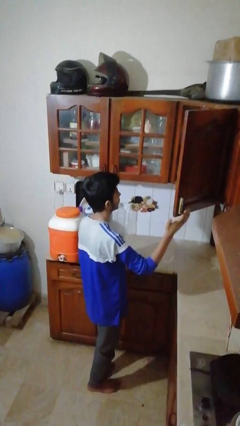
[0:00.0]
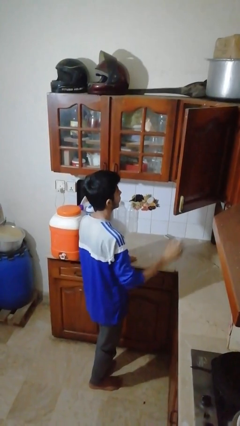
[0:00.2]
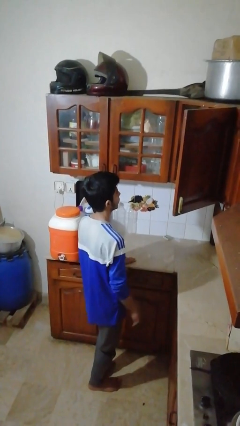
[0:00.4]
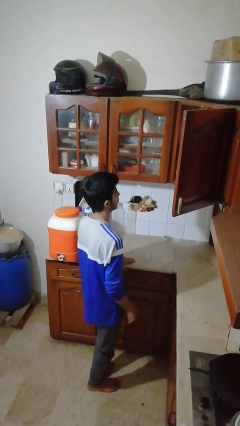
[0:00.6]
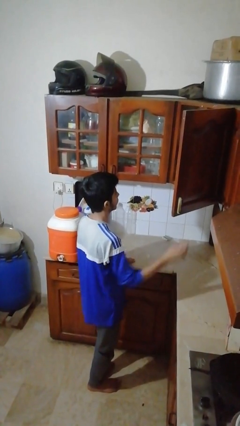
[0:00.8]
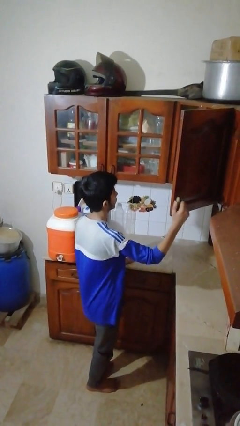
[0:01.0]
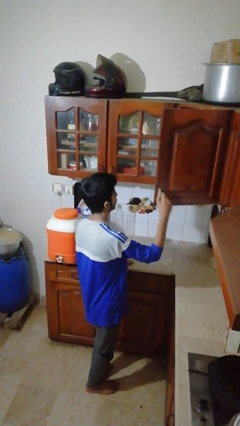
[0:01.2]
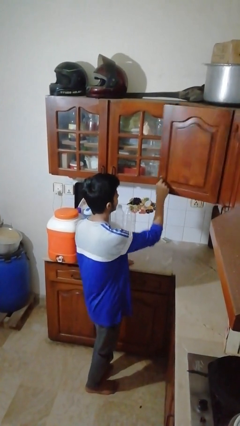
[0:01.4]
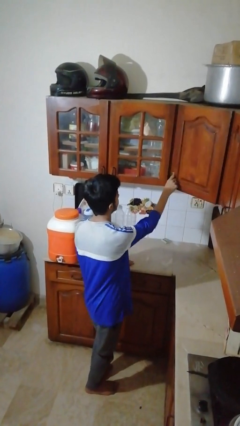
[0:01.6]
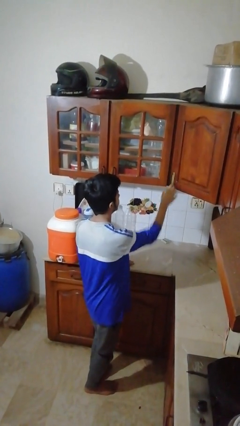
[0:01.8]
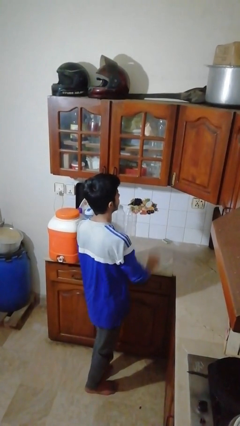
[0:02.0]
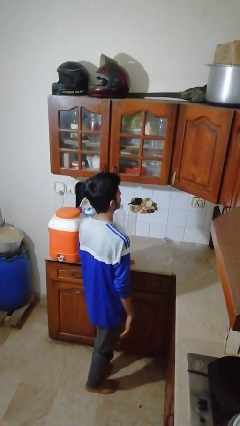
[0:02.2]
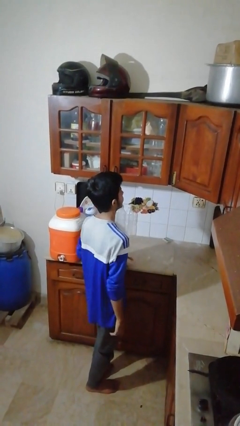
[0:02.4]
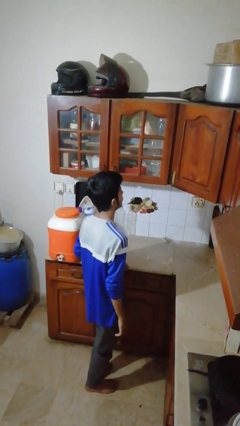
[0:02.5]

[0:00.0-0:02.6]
person closes cabinet

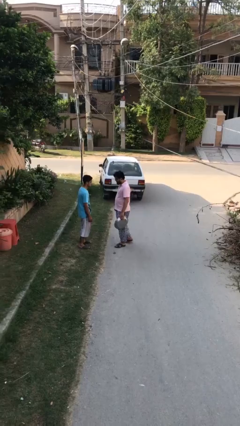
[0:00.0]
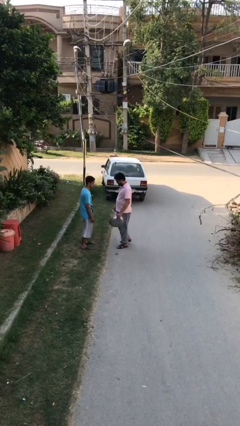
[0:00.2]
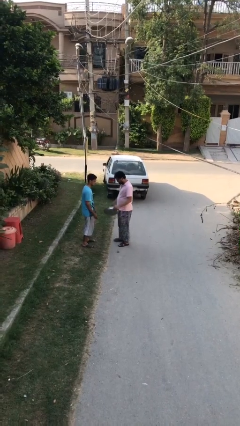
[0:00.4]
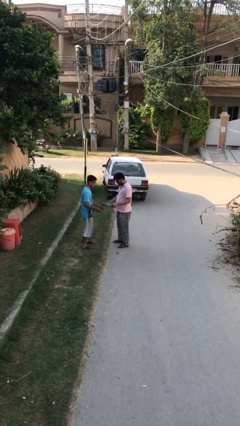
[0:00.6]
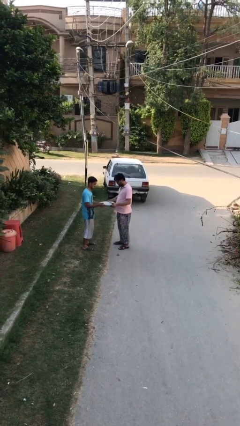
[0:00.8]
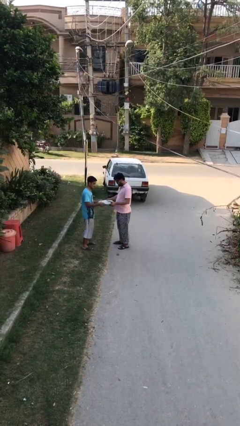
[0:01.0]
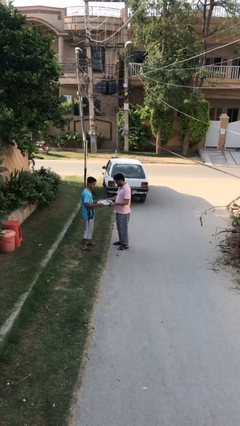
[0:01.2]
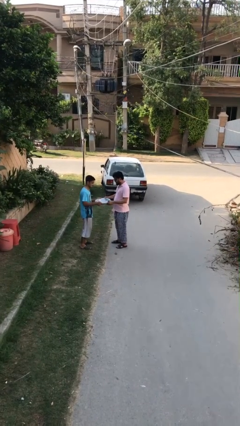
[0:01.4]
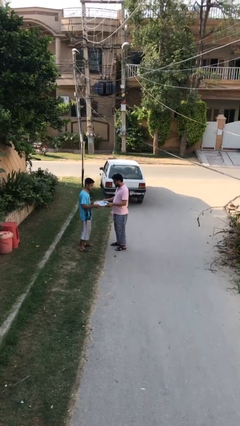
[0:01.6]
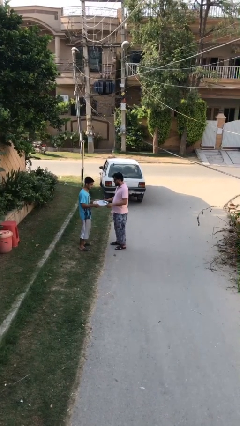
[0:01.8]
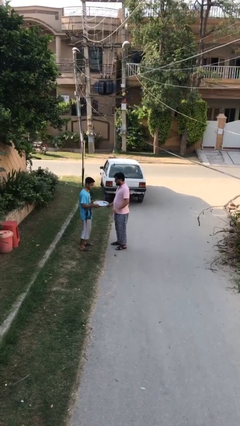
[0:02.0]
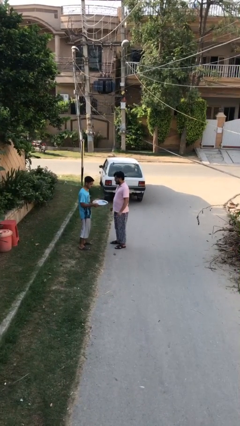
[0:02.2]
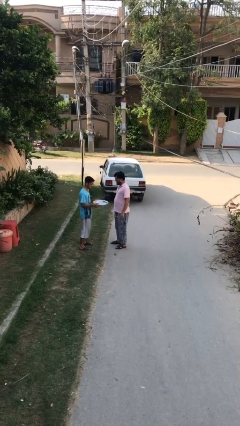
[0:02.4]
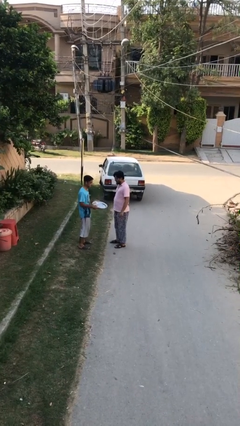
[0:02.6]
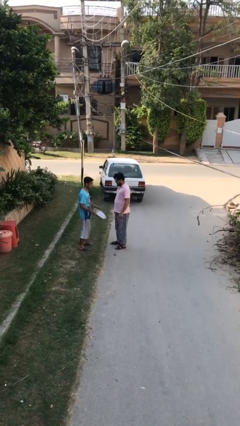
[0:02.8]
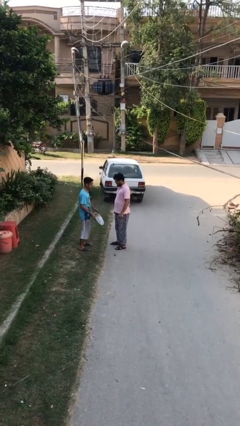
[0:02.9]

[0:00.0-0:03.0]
person transfers object to person

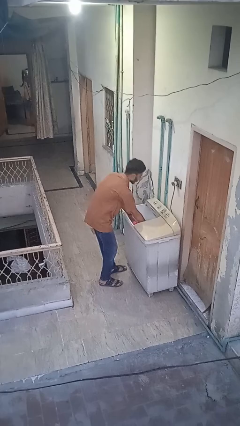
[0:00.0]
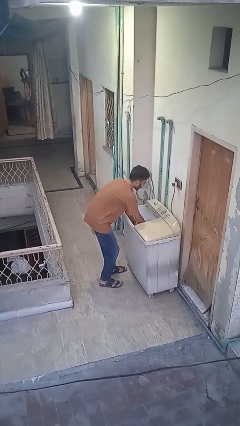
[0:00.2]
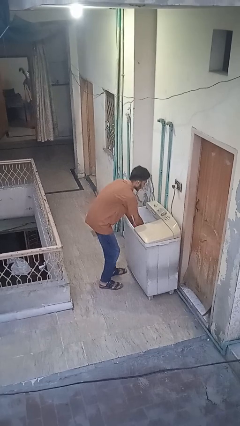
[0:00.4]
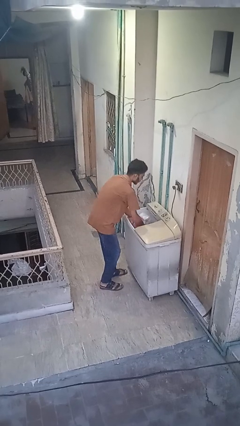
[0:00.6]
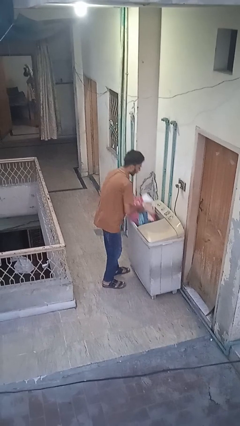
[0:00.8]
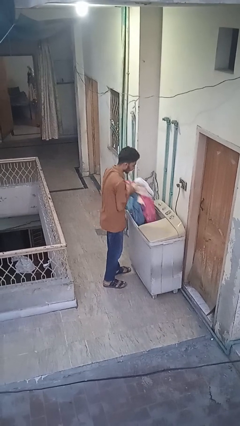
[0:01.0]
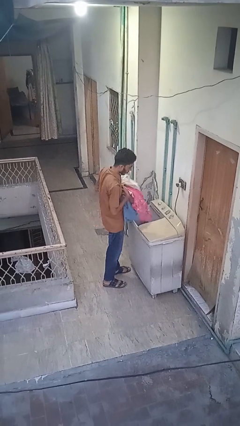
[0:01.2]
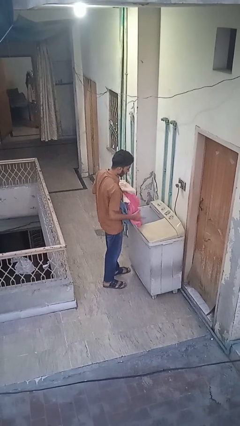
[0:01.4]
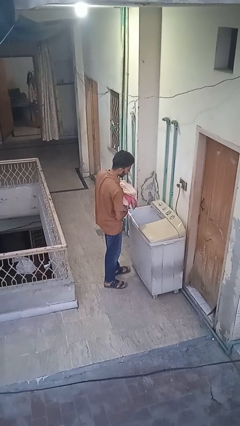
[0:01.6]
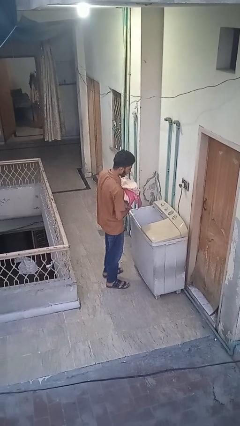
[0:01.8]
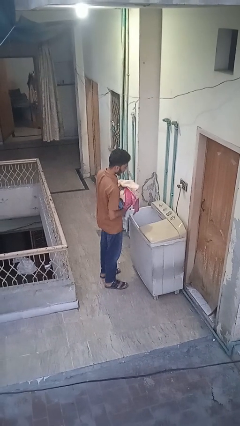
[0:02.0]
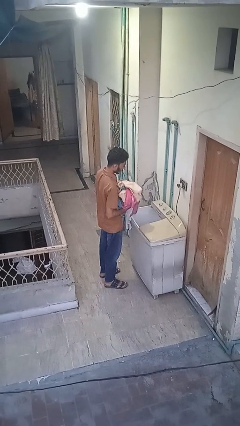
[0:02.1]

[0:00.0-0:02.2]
person unloads clotheswasher

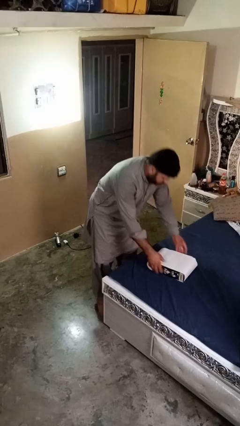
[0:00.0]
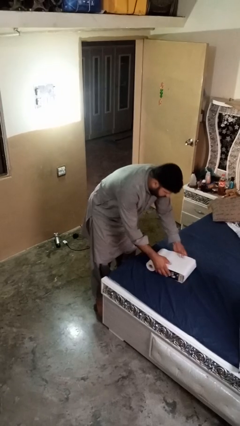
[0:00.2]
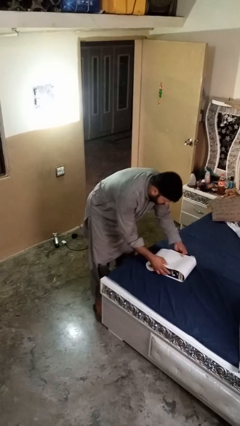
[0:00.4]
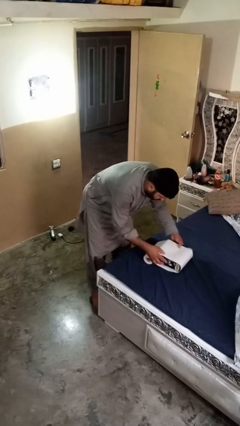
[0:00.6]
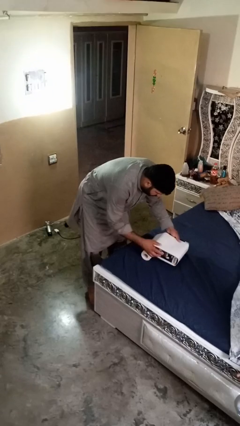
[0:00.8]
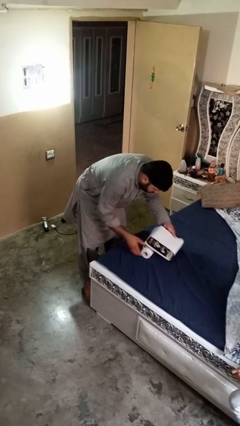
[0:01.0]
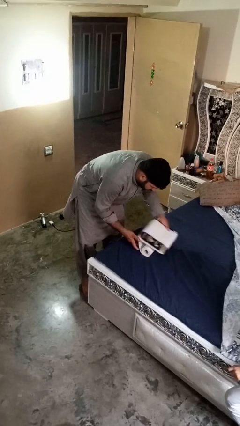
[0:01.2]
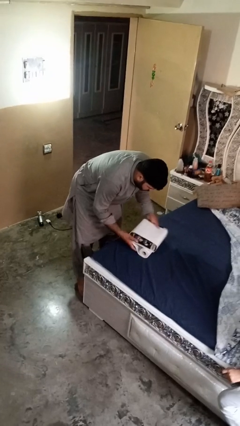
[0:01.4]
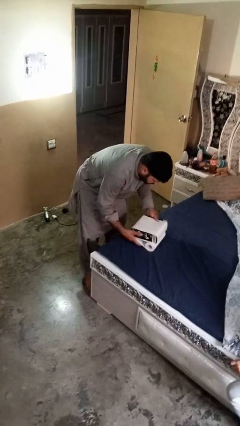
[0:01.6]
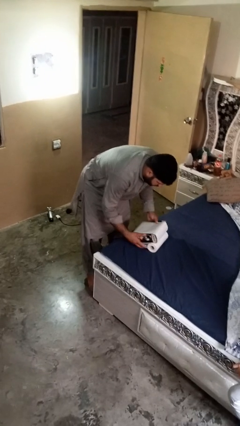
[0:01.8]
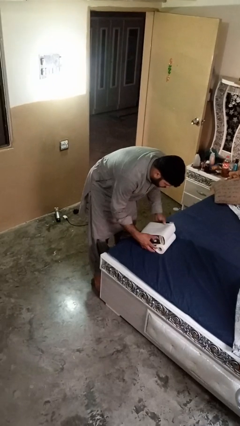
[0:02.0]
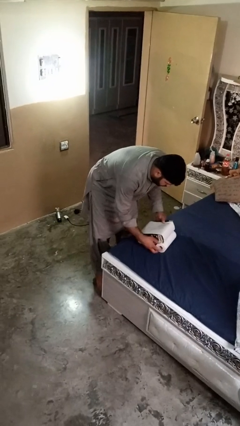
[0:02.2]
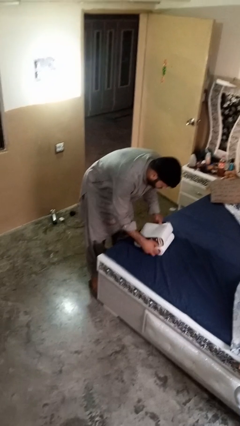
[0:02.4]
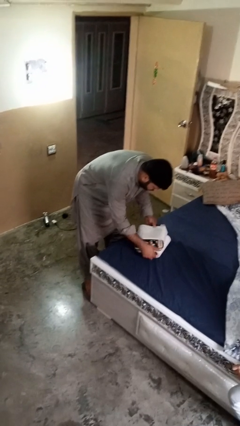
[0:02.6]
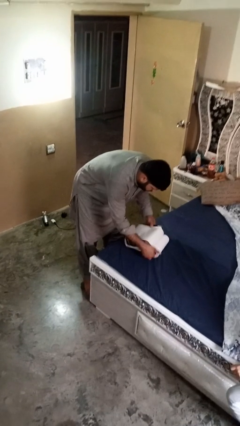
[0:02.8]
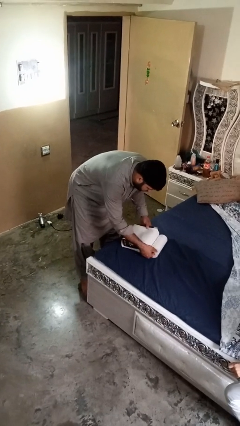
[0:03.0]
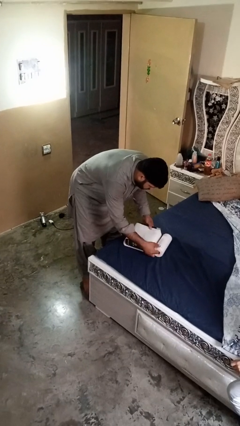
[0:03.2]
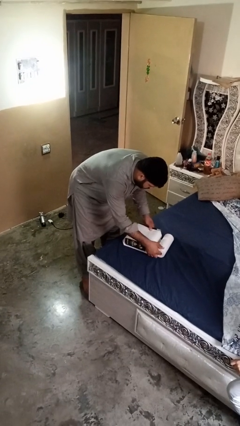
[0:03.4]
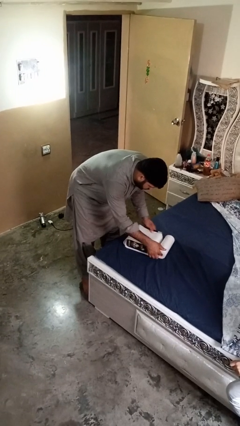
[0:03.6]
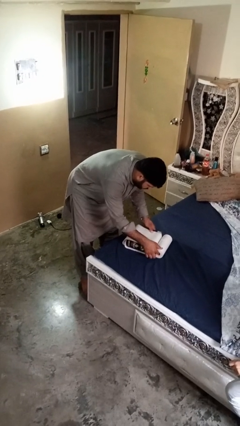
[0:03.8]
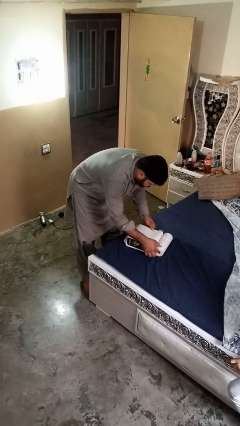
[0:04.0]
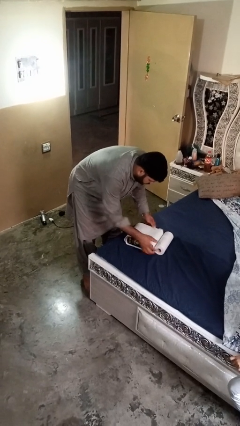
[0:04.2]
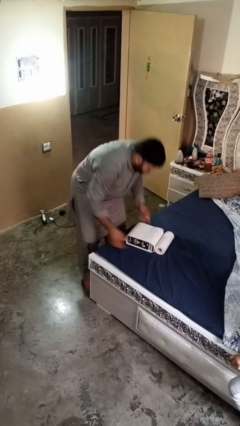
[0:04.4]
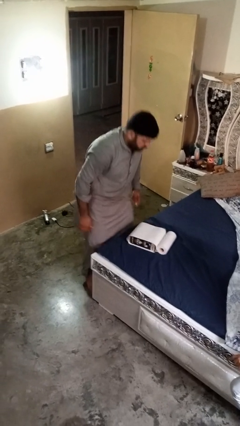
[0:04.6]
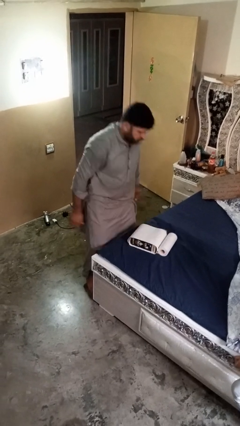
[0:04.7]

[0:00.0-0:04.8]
person wraps box

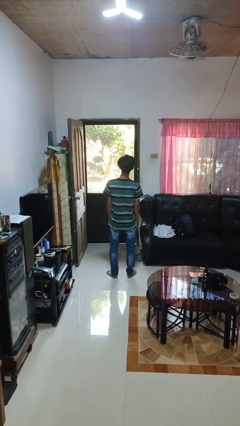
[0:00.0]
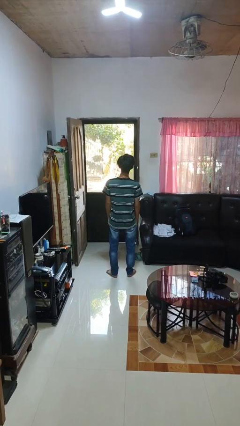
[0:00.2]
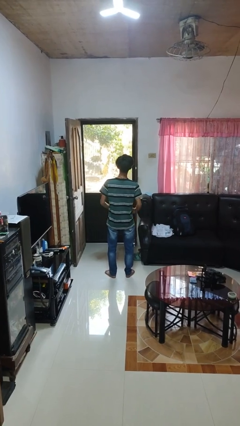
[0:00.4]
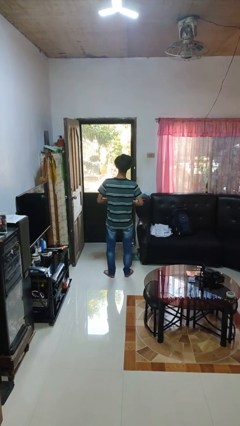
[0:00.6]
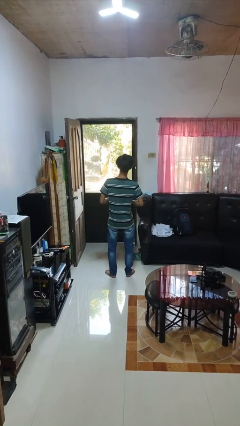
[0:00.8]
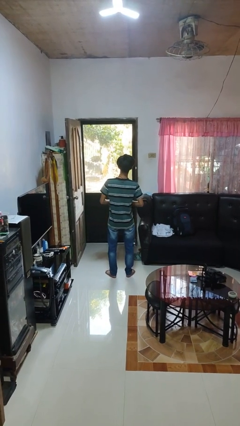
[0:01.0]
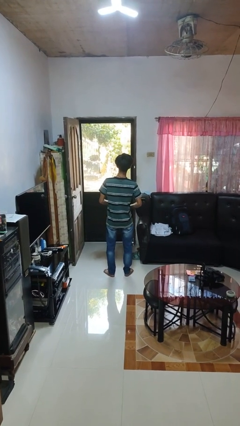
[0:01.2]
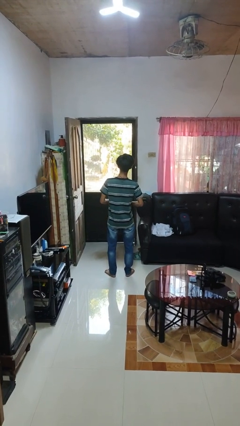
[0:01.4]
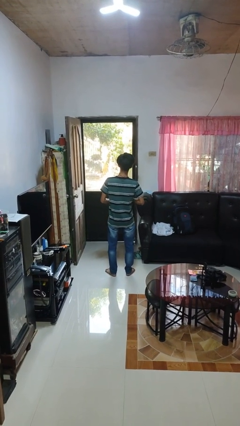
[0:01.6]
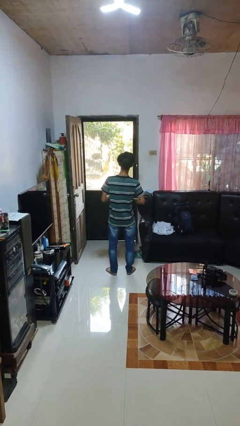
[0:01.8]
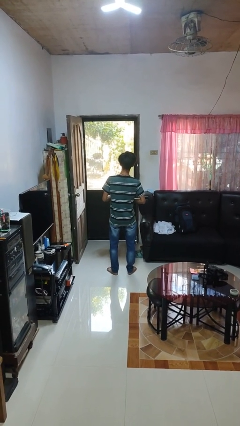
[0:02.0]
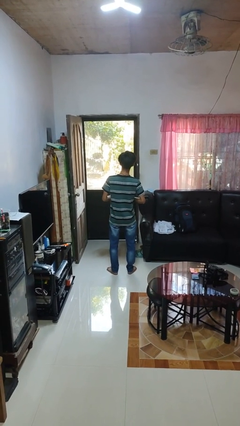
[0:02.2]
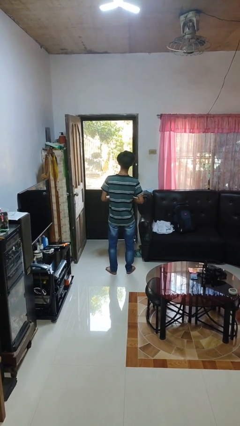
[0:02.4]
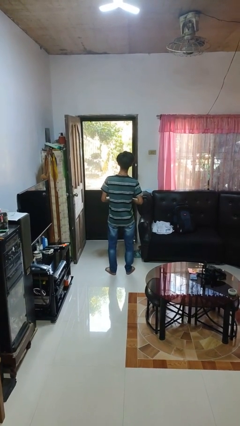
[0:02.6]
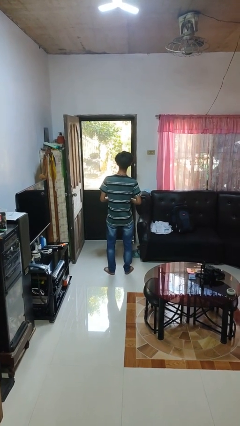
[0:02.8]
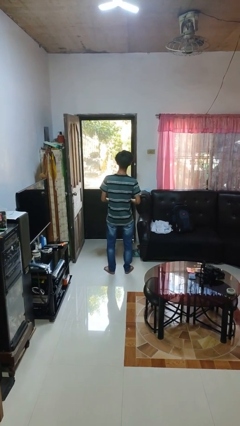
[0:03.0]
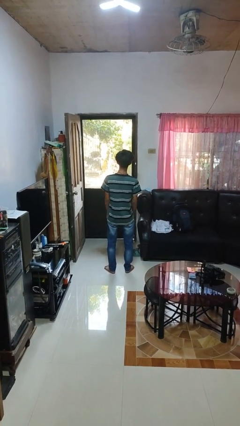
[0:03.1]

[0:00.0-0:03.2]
person unbuttons shirt

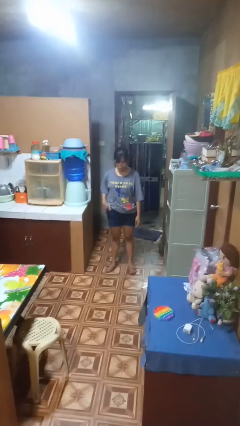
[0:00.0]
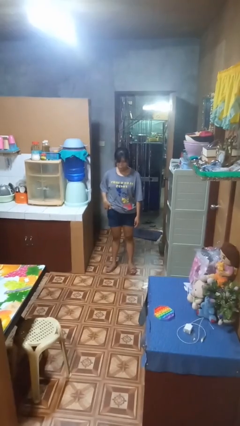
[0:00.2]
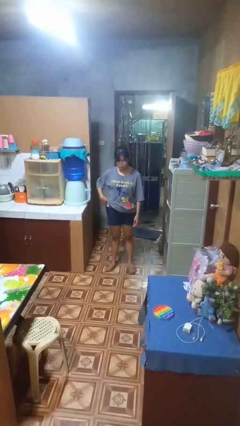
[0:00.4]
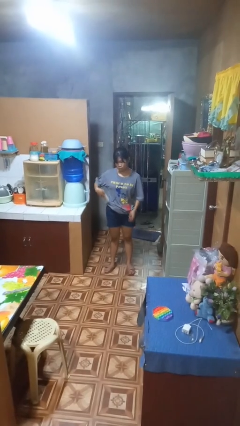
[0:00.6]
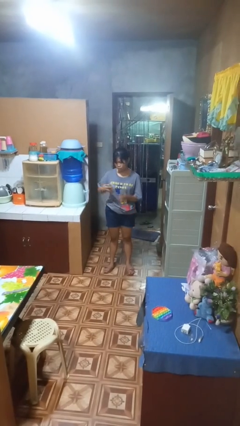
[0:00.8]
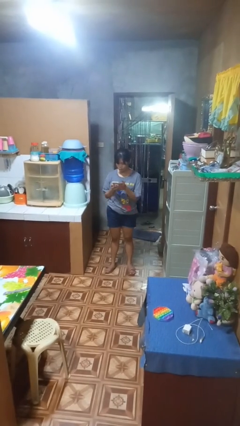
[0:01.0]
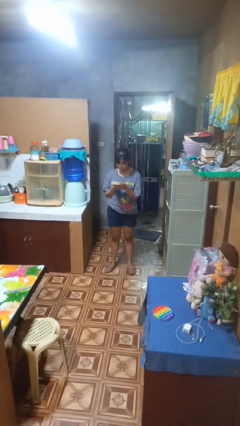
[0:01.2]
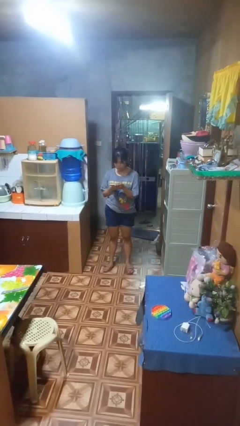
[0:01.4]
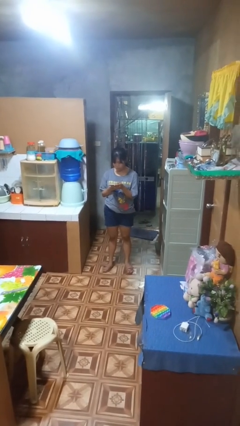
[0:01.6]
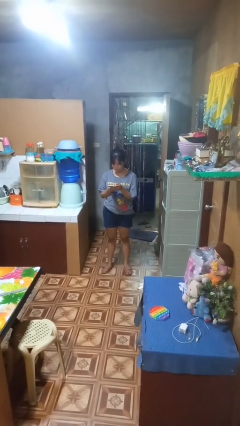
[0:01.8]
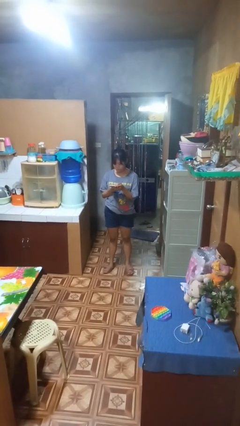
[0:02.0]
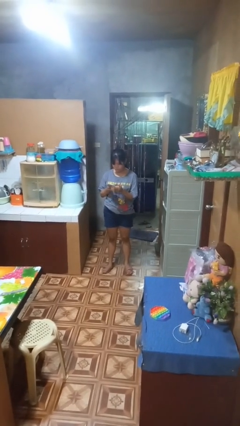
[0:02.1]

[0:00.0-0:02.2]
person takes phone from pocket
